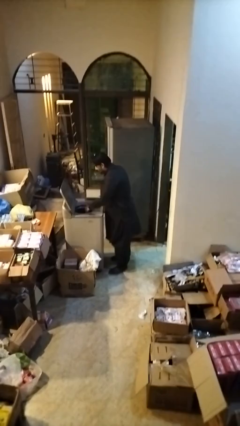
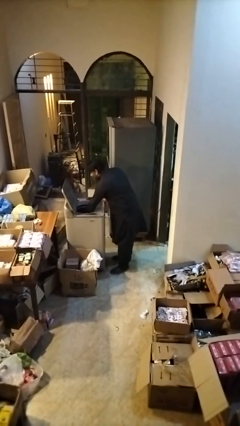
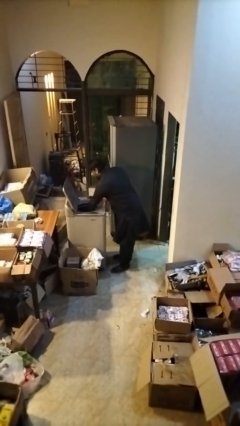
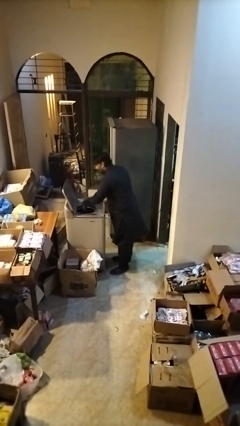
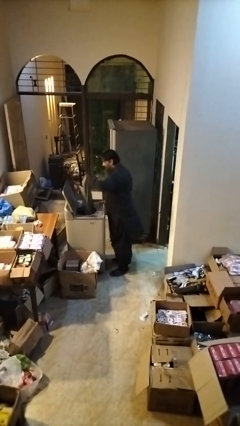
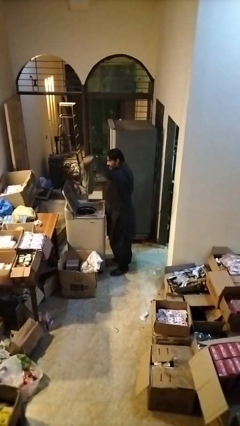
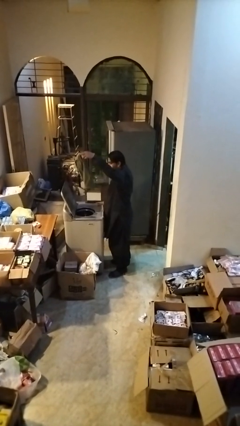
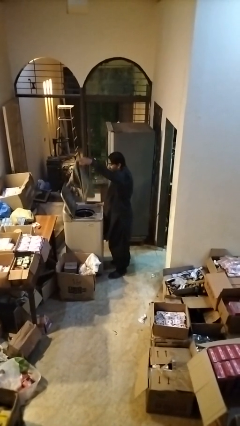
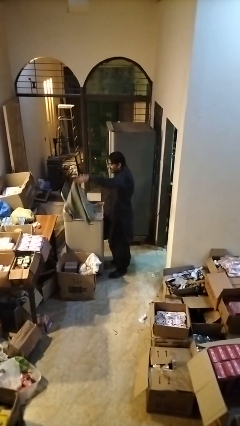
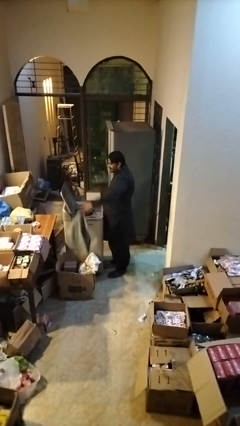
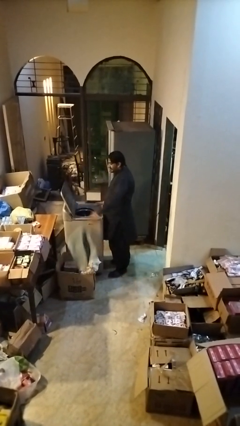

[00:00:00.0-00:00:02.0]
person unloads dryer

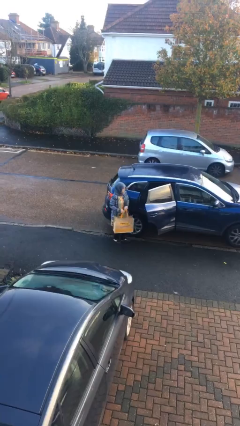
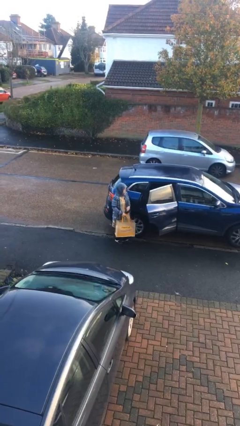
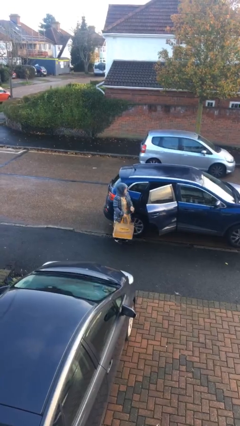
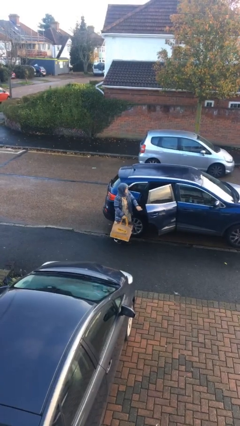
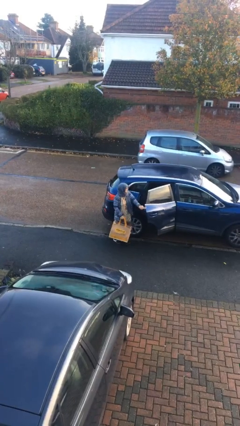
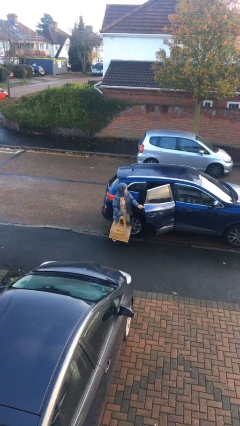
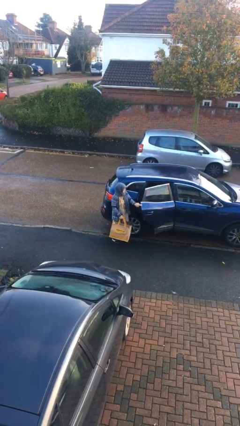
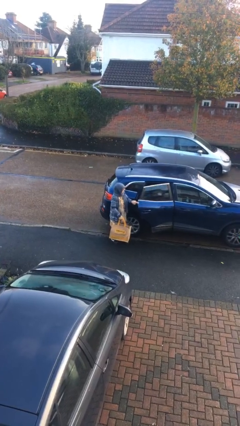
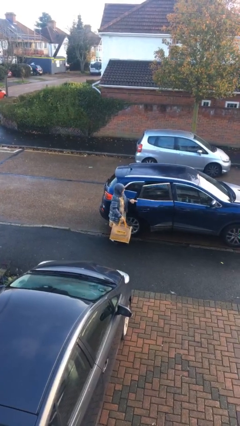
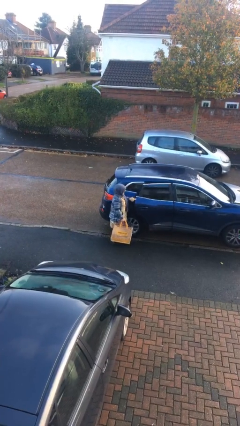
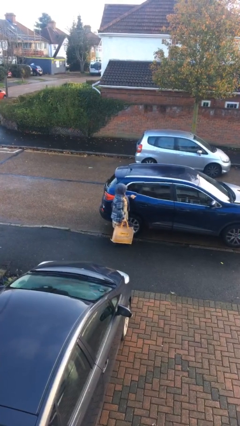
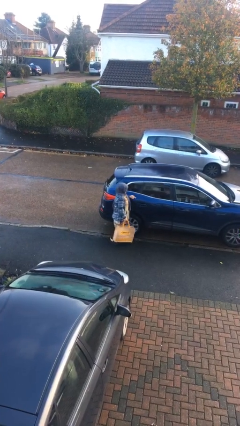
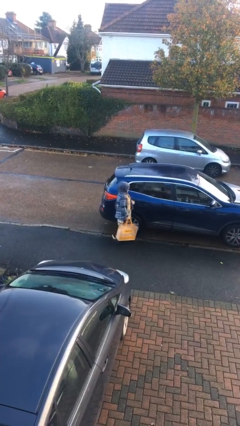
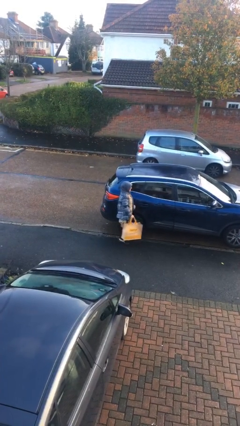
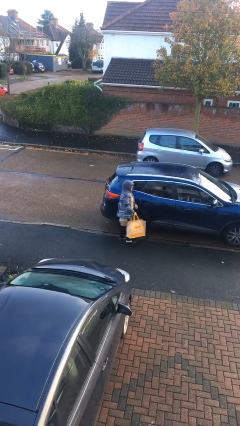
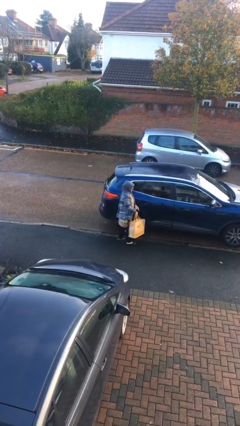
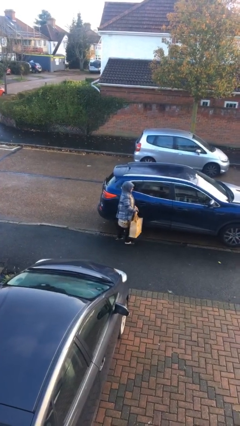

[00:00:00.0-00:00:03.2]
person closes car door

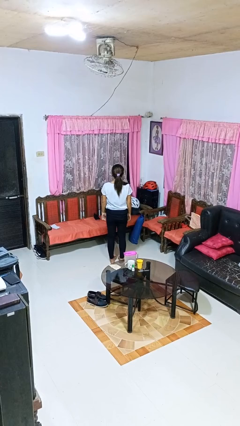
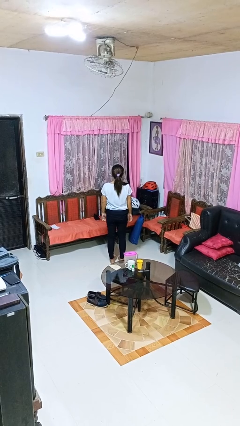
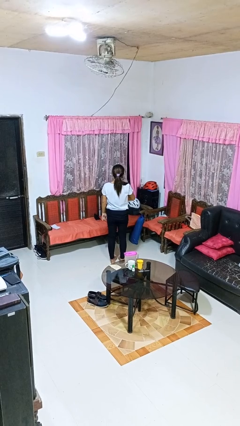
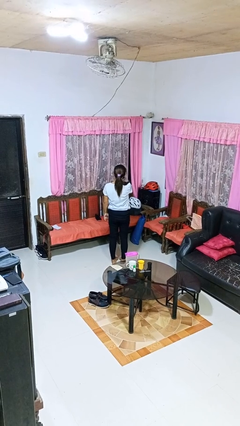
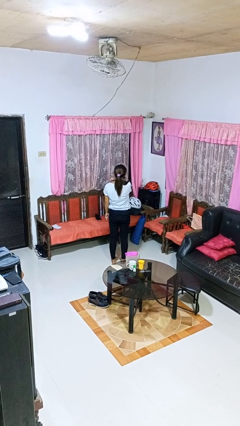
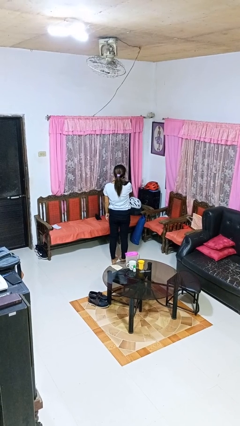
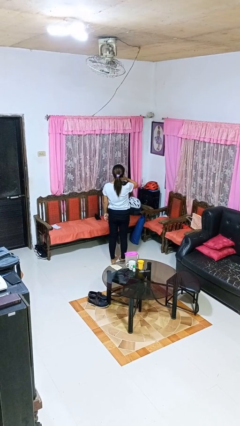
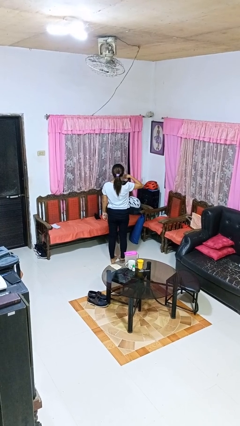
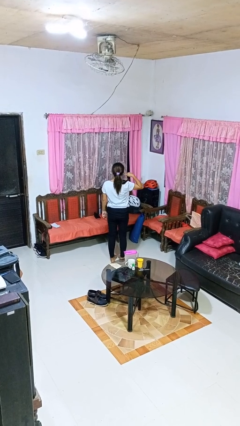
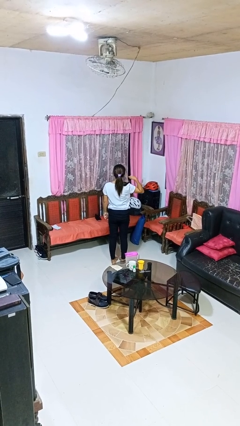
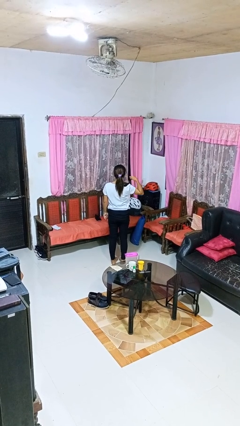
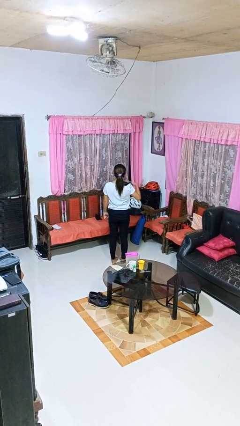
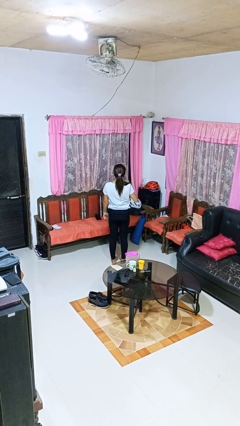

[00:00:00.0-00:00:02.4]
person gestures cut

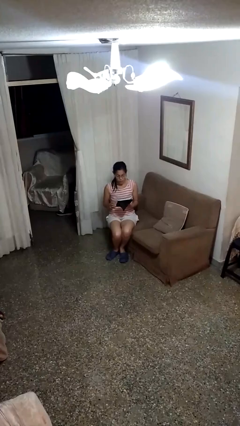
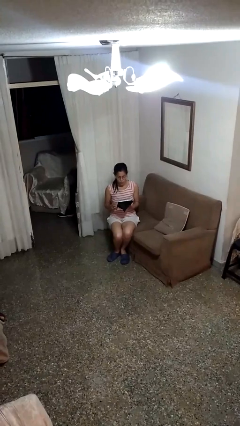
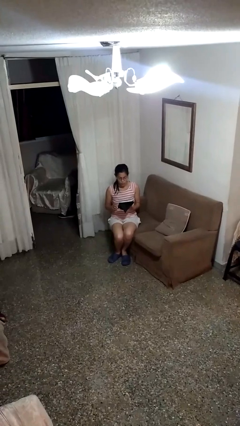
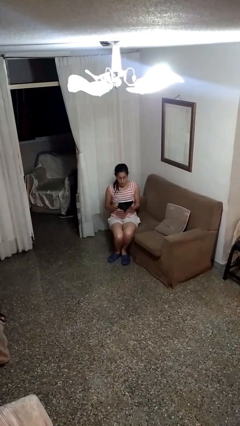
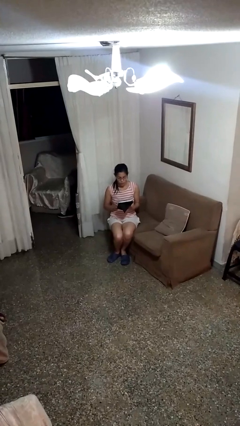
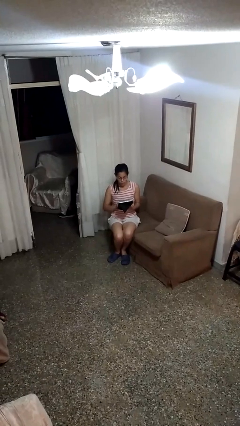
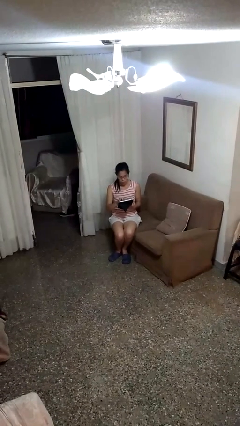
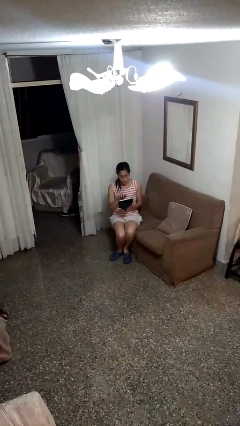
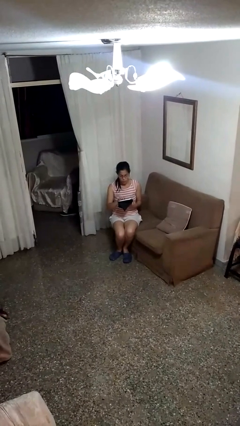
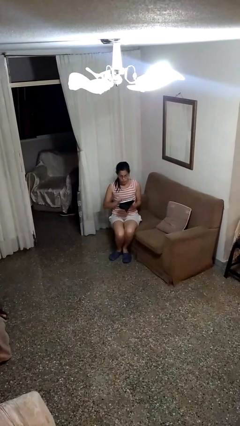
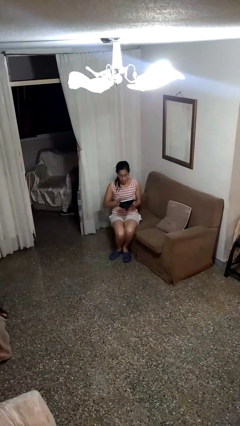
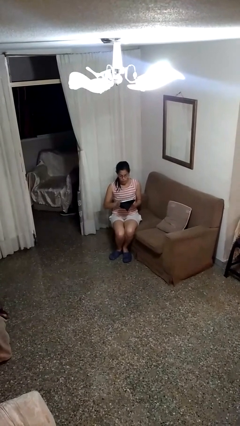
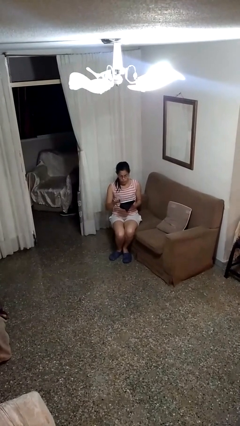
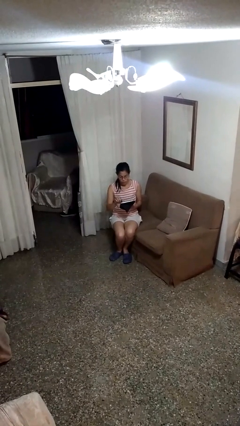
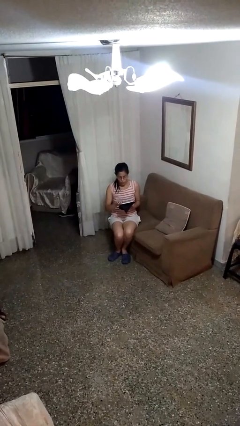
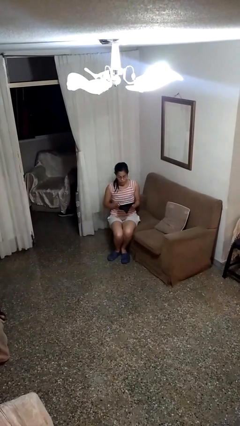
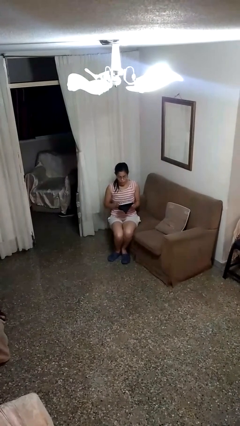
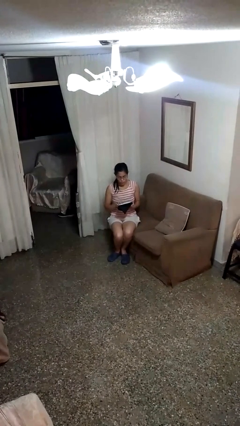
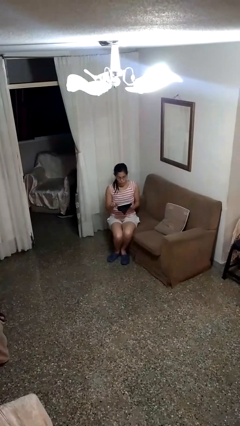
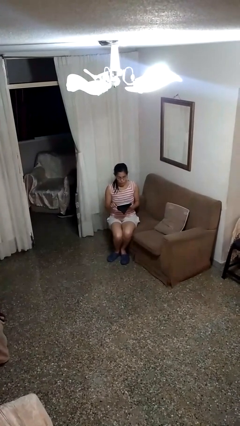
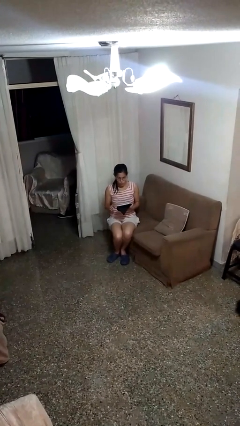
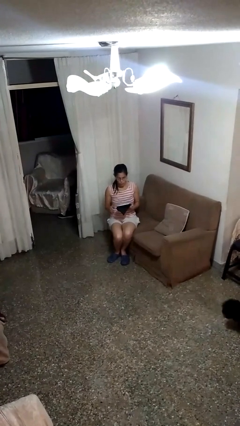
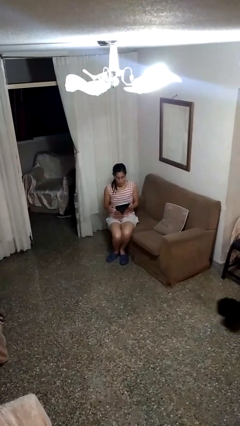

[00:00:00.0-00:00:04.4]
person interacts with tablet

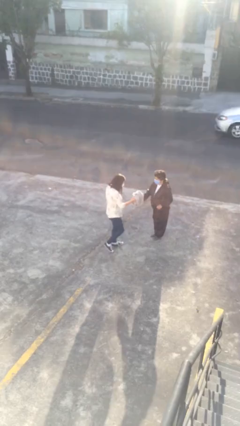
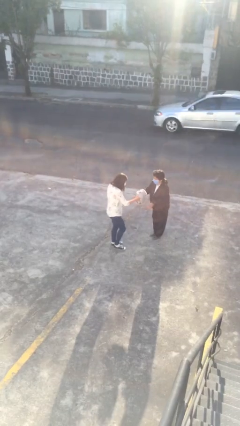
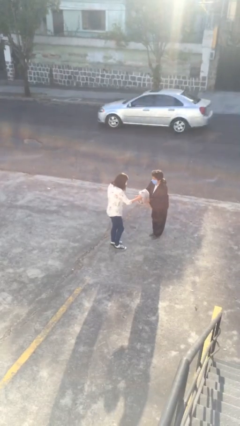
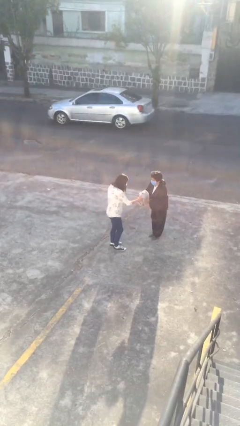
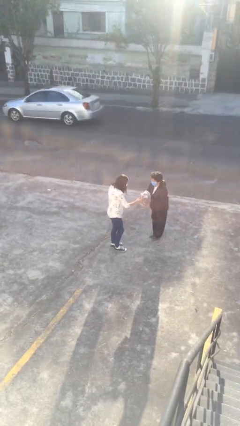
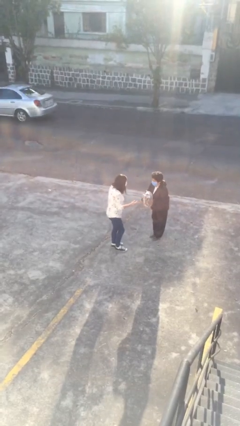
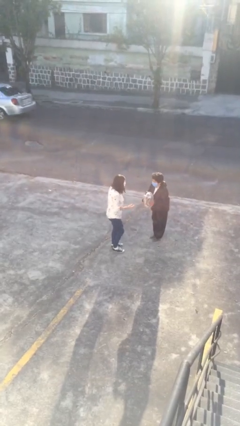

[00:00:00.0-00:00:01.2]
person transfers object to person

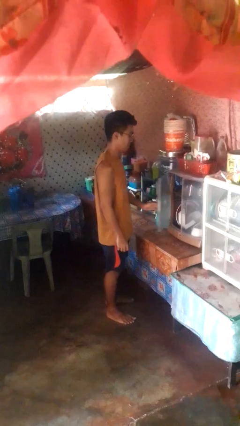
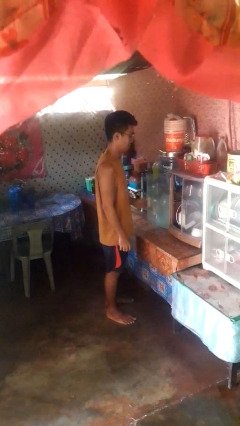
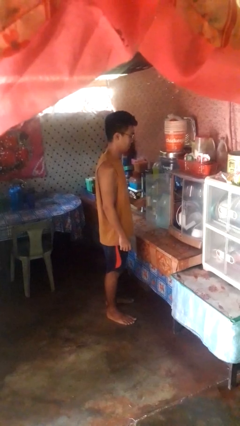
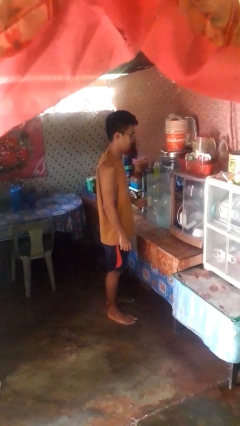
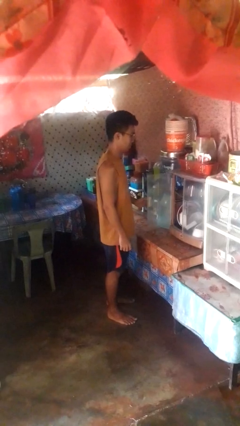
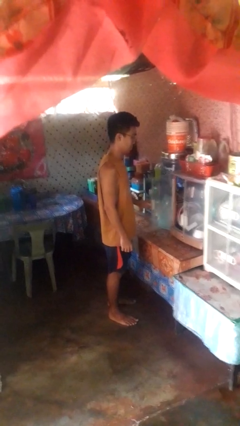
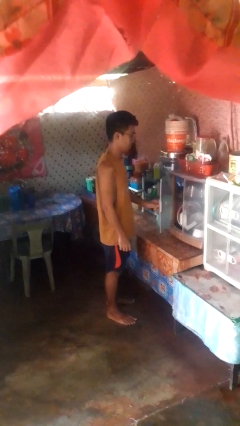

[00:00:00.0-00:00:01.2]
person opens cabinet

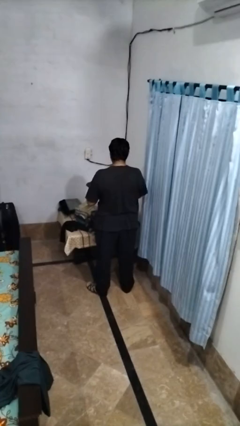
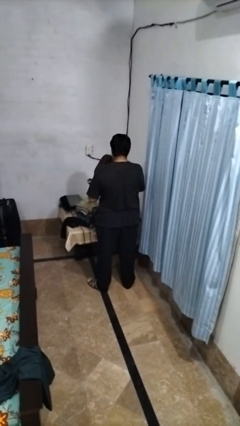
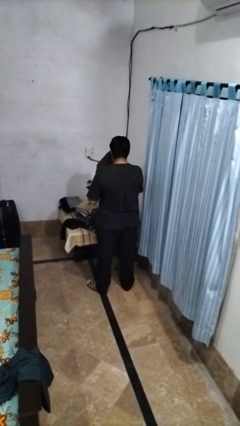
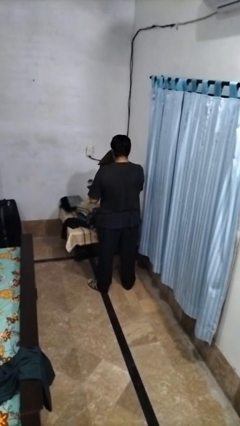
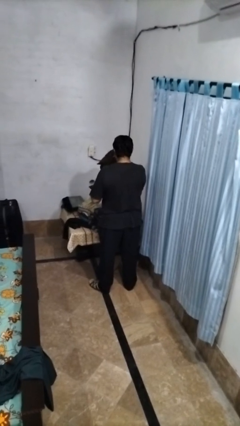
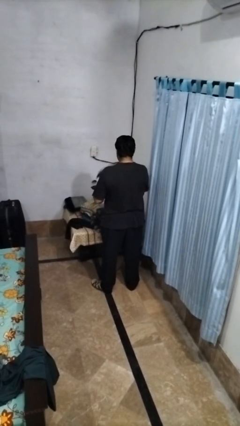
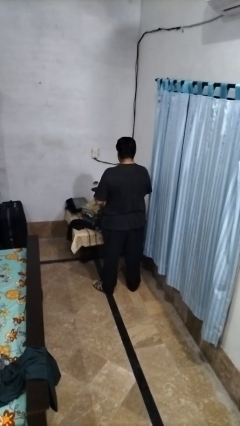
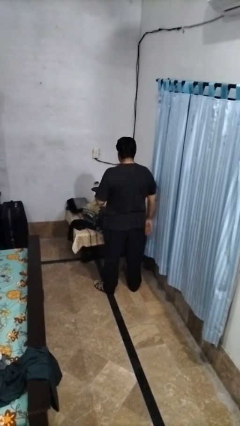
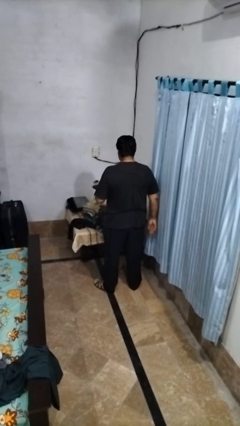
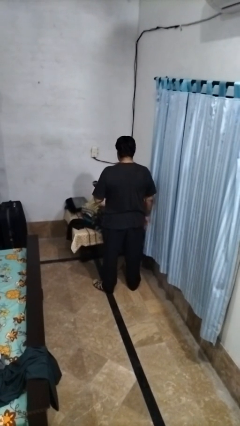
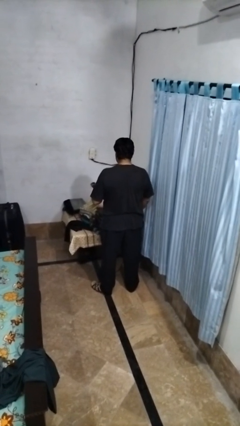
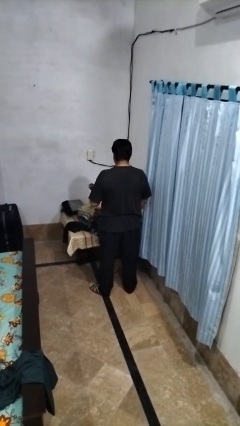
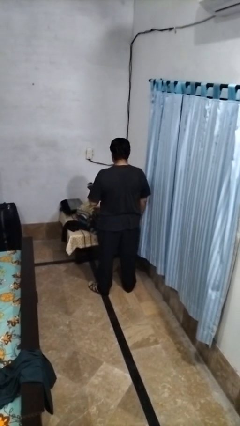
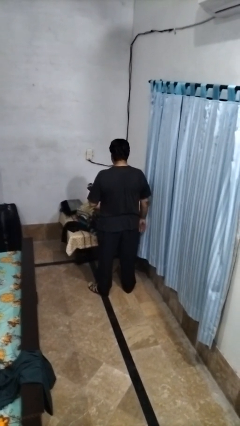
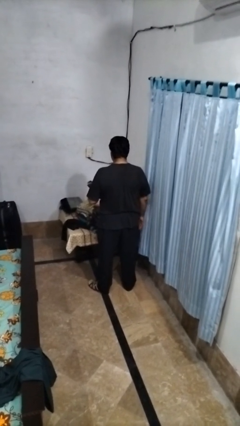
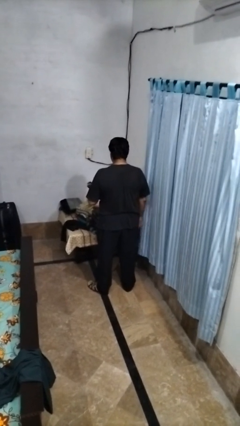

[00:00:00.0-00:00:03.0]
person loads clothes into suitcase
